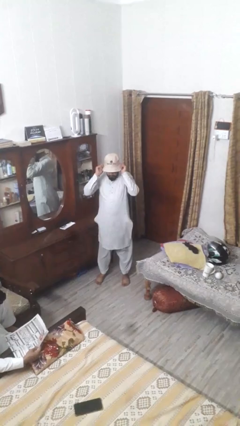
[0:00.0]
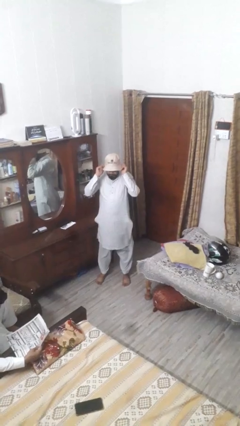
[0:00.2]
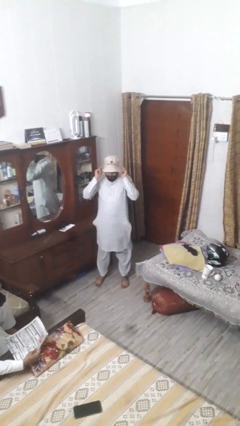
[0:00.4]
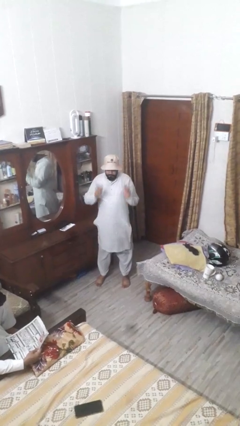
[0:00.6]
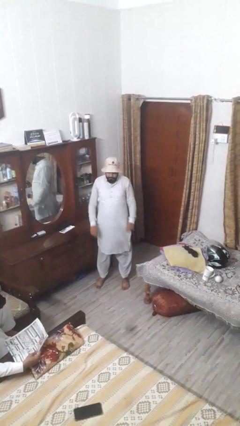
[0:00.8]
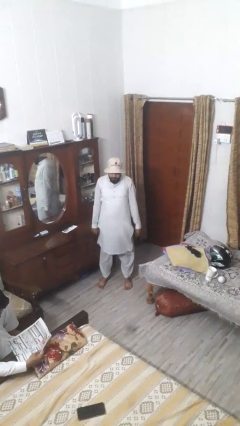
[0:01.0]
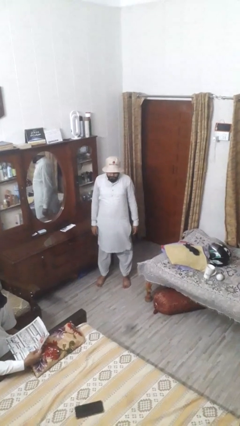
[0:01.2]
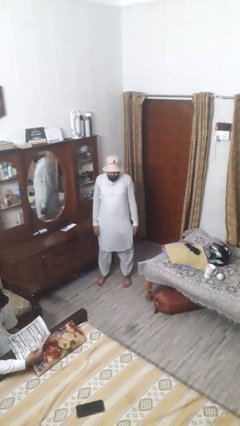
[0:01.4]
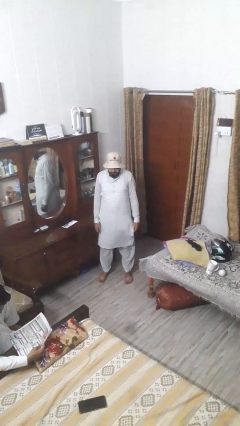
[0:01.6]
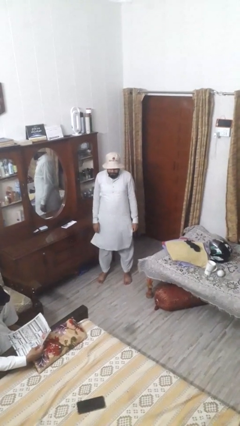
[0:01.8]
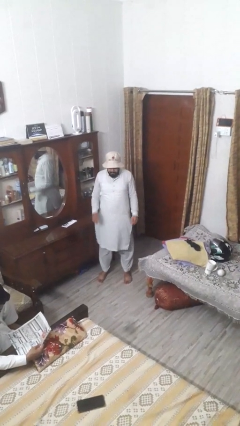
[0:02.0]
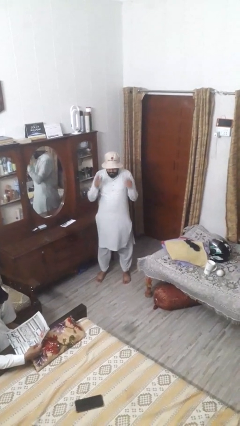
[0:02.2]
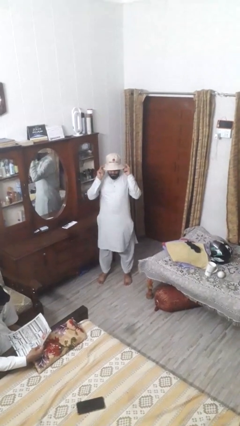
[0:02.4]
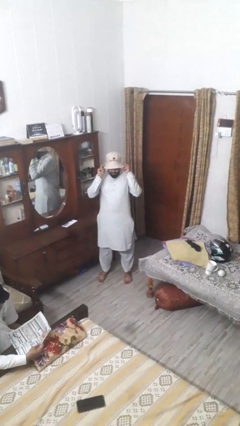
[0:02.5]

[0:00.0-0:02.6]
person puts on hat

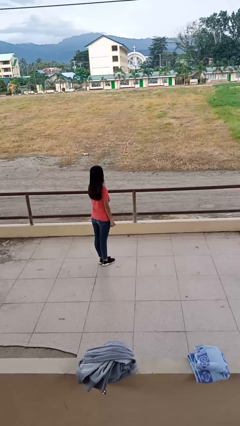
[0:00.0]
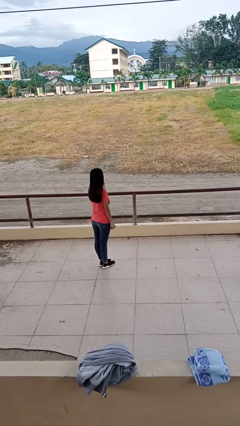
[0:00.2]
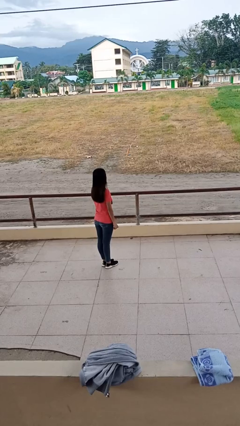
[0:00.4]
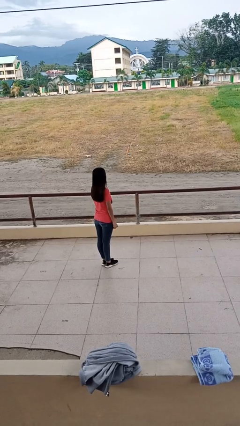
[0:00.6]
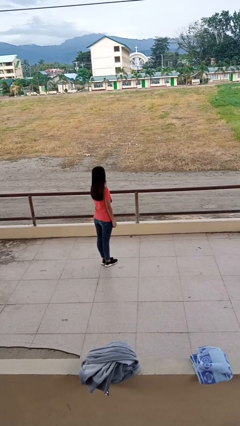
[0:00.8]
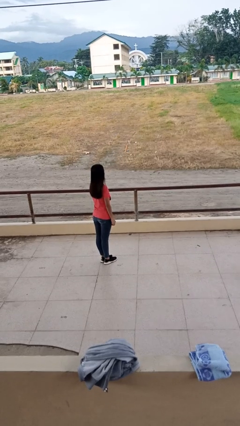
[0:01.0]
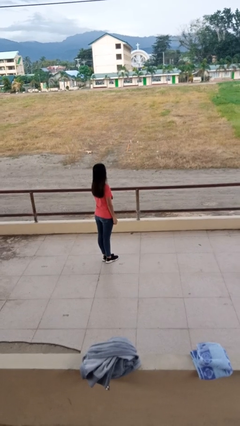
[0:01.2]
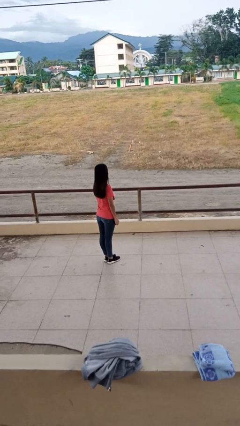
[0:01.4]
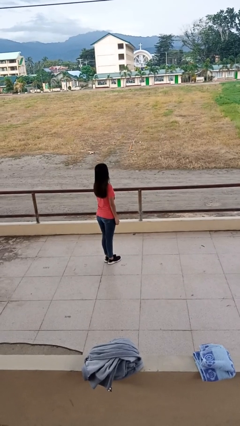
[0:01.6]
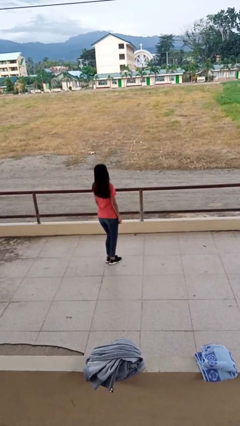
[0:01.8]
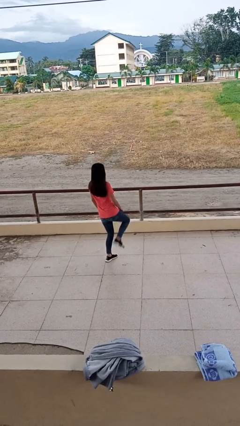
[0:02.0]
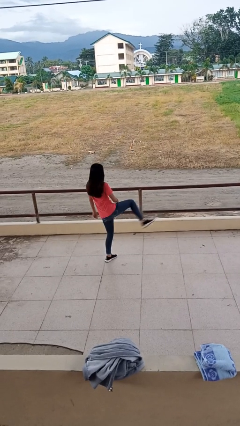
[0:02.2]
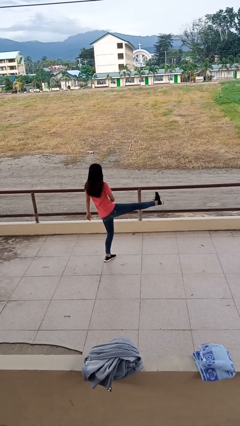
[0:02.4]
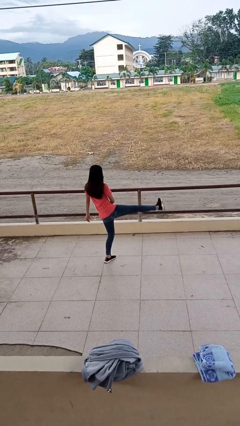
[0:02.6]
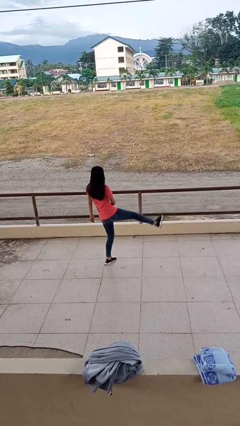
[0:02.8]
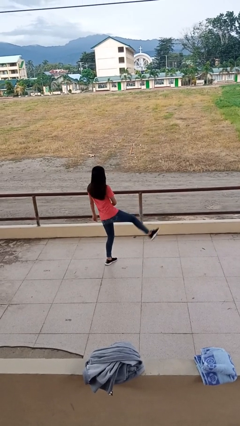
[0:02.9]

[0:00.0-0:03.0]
person karate kicks

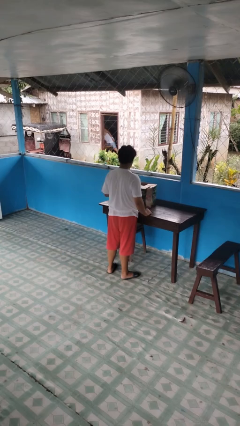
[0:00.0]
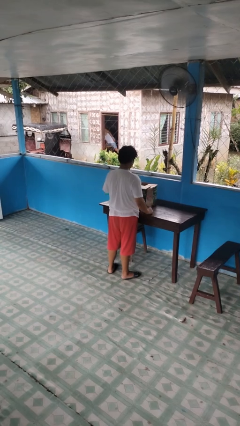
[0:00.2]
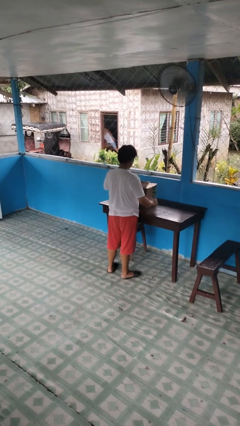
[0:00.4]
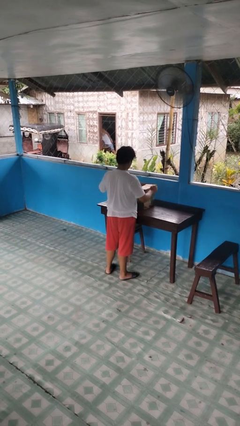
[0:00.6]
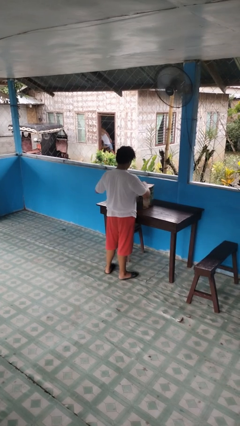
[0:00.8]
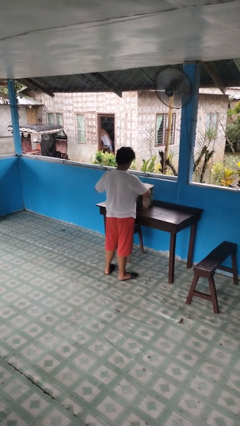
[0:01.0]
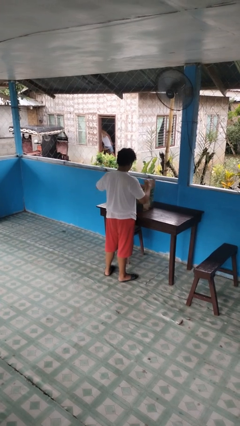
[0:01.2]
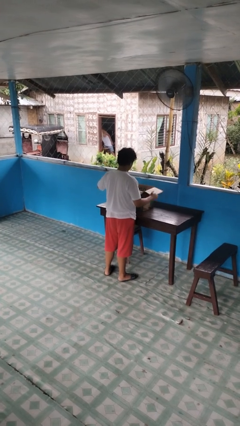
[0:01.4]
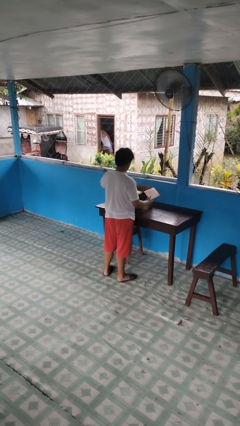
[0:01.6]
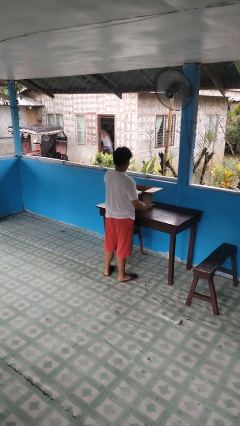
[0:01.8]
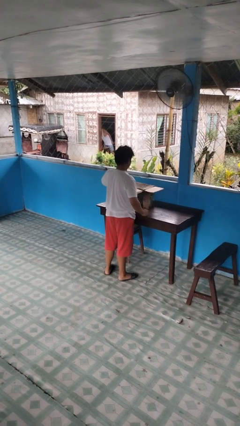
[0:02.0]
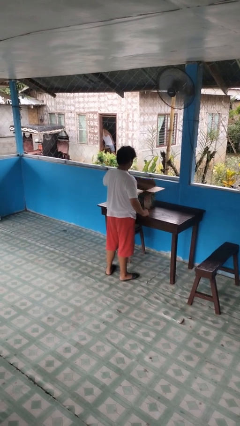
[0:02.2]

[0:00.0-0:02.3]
person opens box

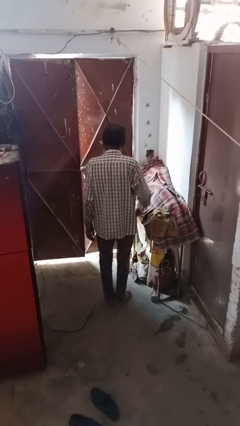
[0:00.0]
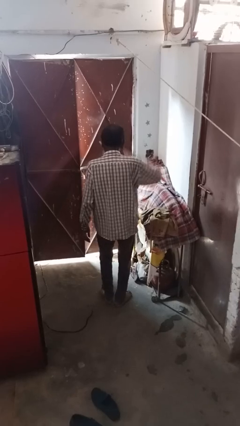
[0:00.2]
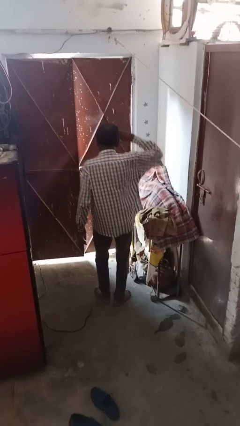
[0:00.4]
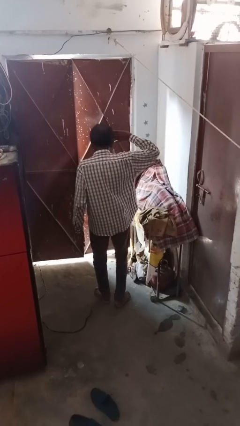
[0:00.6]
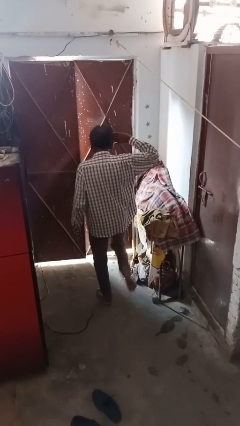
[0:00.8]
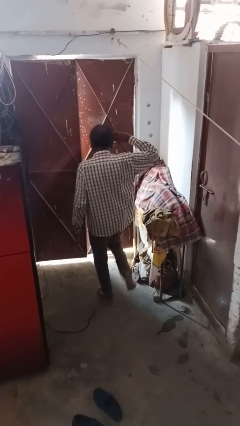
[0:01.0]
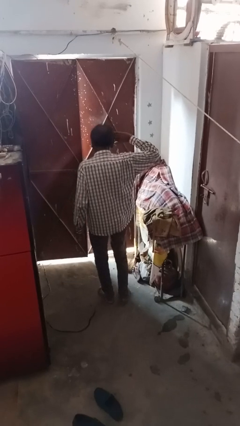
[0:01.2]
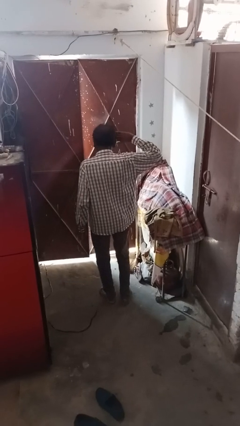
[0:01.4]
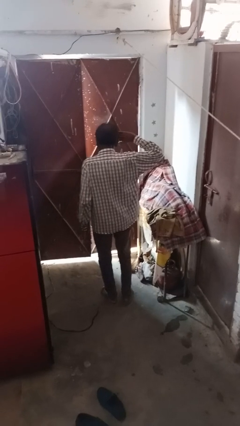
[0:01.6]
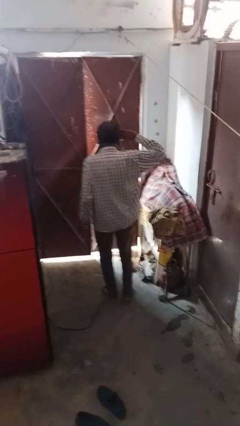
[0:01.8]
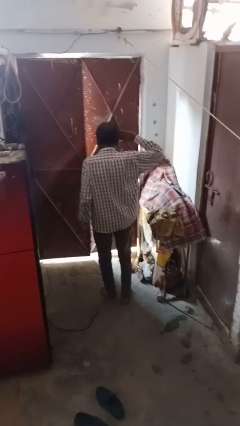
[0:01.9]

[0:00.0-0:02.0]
person salutes

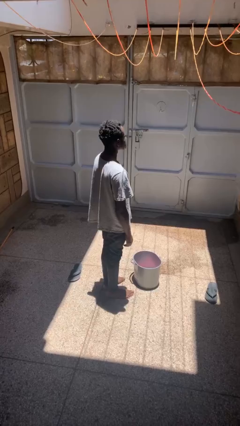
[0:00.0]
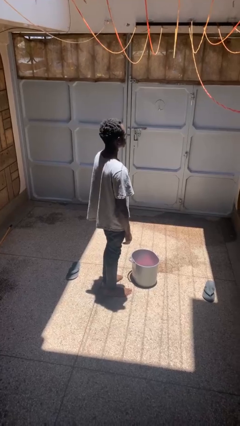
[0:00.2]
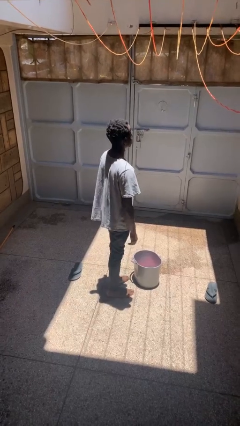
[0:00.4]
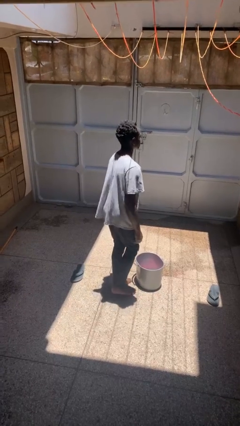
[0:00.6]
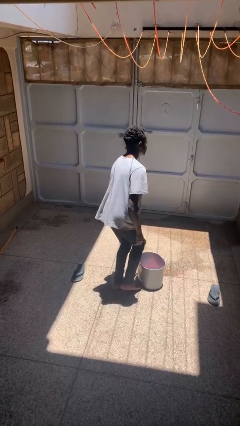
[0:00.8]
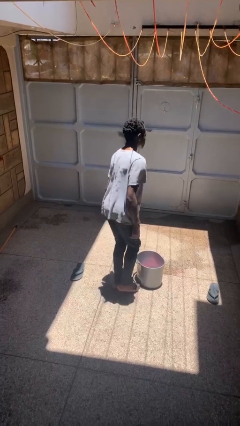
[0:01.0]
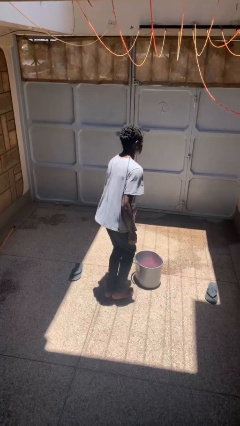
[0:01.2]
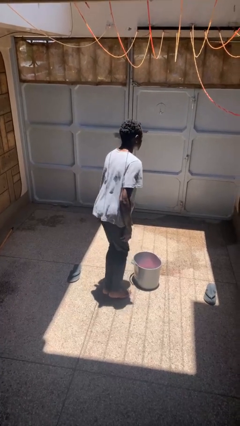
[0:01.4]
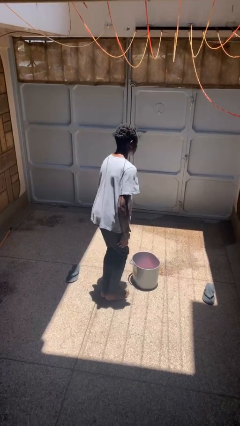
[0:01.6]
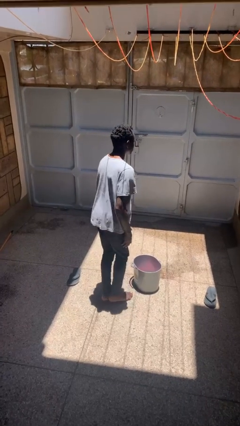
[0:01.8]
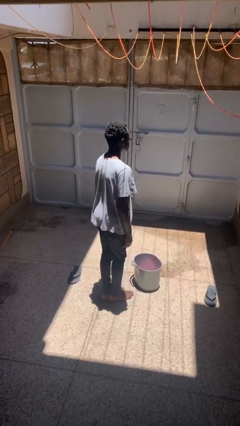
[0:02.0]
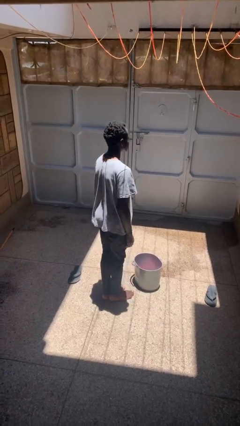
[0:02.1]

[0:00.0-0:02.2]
person touches earlobe

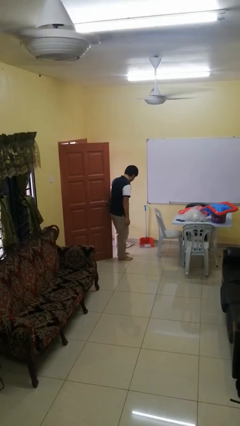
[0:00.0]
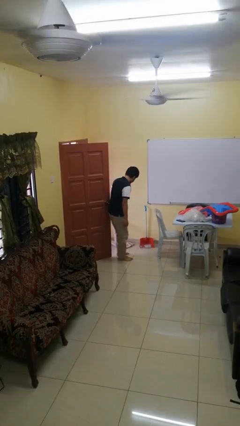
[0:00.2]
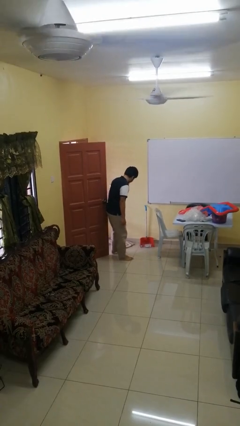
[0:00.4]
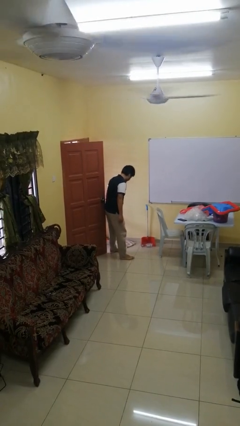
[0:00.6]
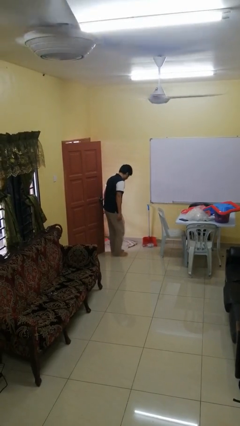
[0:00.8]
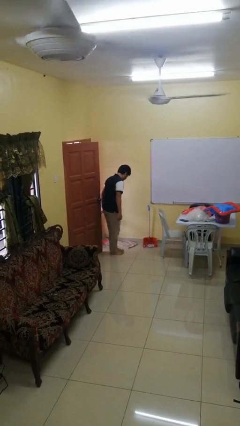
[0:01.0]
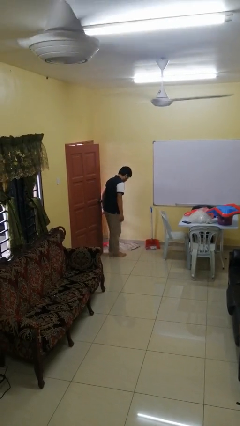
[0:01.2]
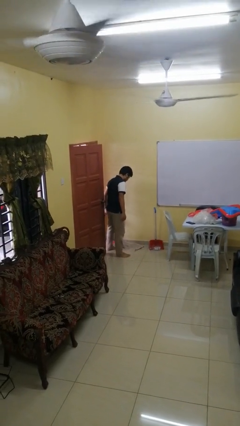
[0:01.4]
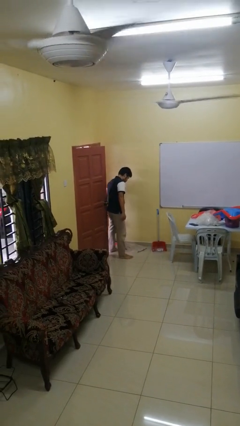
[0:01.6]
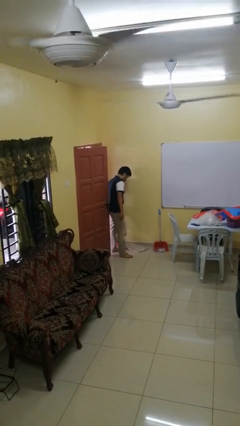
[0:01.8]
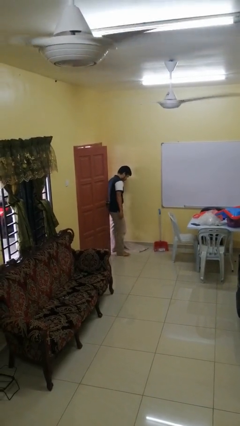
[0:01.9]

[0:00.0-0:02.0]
person closes door with hip

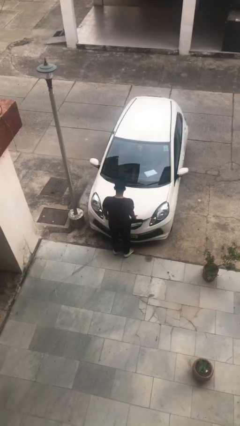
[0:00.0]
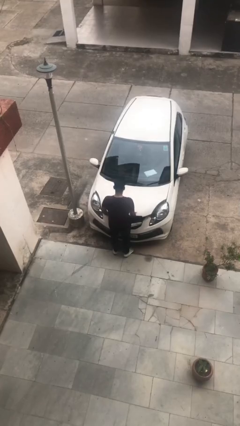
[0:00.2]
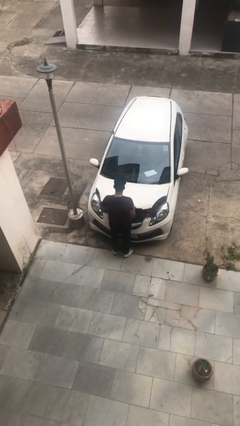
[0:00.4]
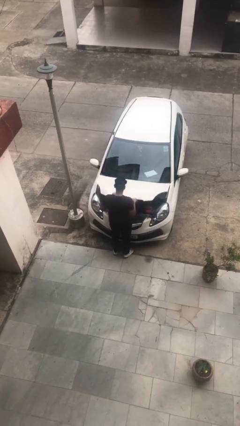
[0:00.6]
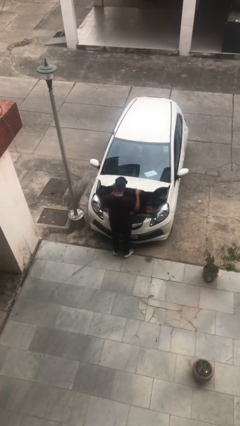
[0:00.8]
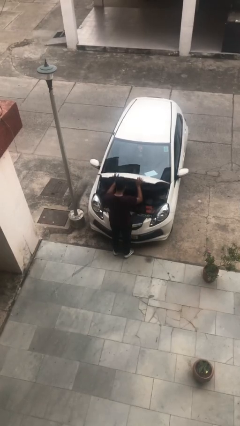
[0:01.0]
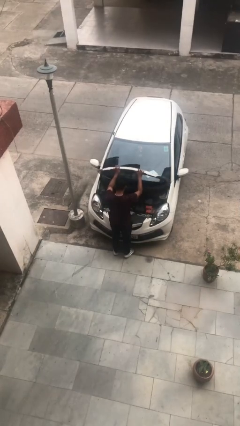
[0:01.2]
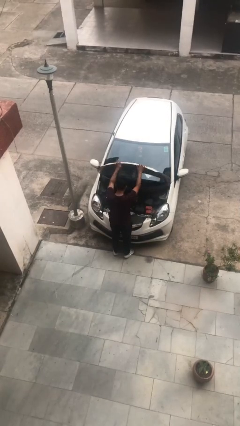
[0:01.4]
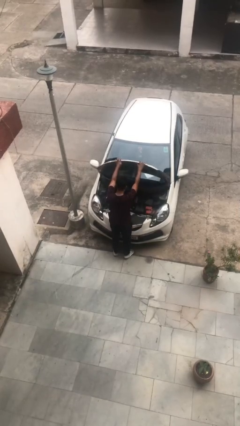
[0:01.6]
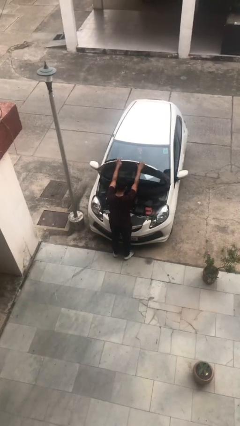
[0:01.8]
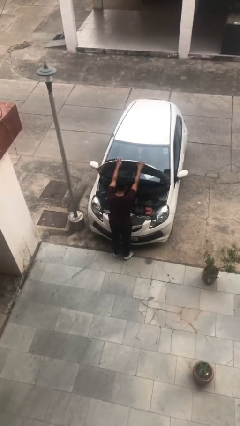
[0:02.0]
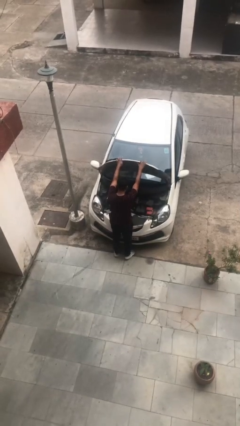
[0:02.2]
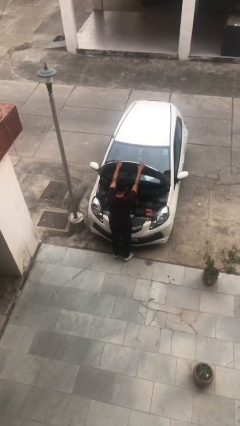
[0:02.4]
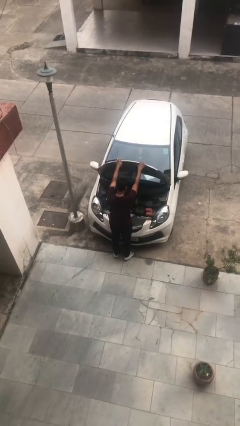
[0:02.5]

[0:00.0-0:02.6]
person opens car hood

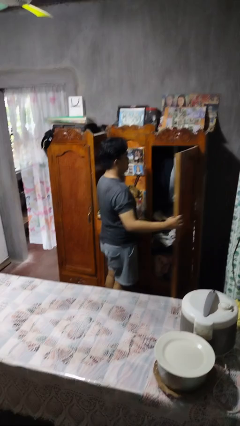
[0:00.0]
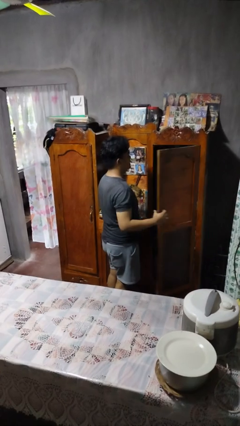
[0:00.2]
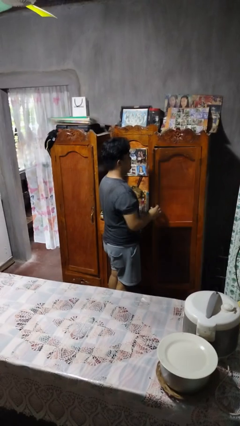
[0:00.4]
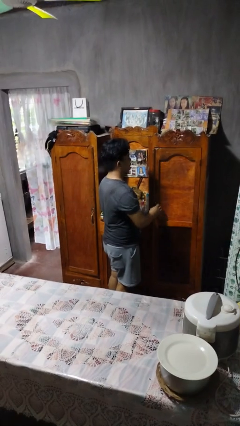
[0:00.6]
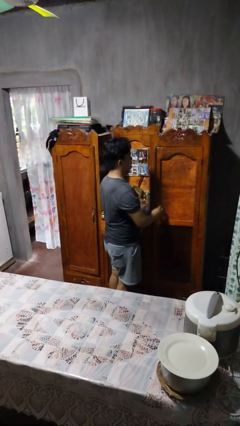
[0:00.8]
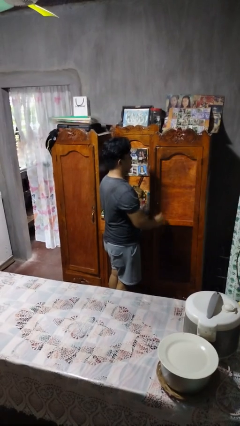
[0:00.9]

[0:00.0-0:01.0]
person closes closet door
